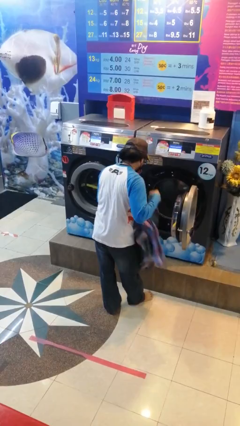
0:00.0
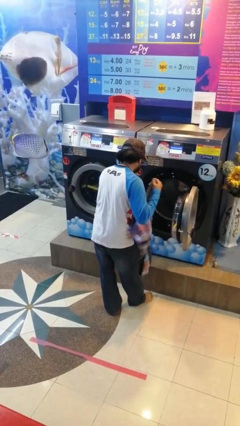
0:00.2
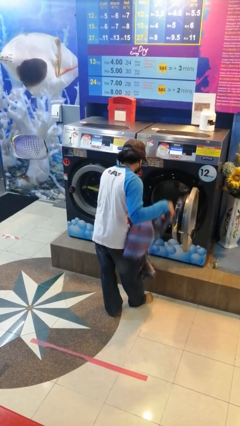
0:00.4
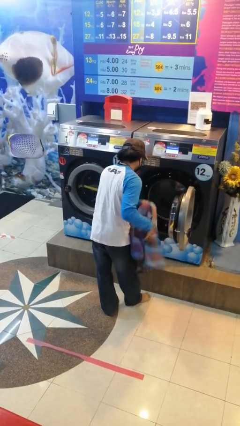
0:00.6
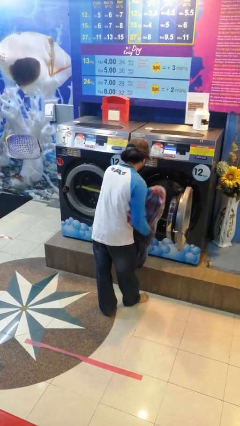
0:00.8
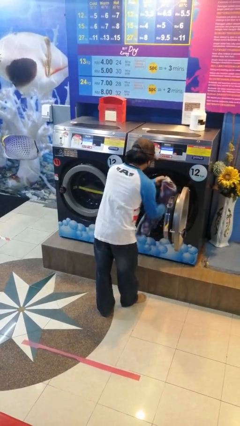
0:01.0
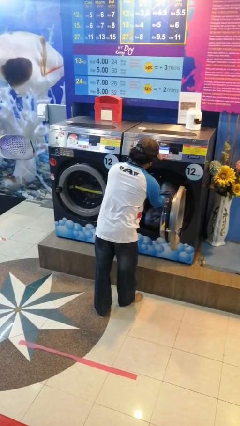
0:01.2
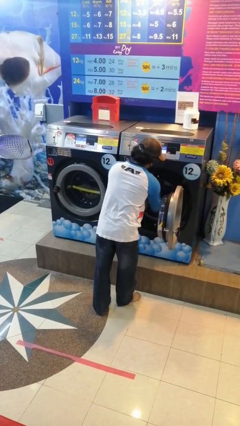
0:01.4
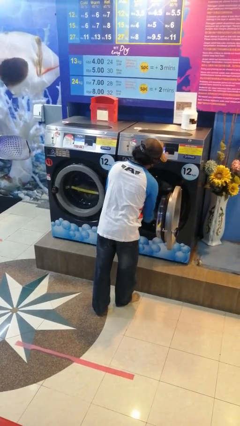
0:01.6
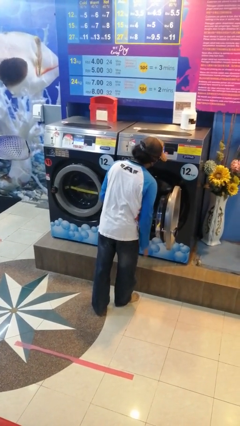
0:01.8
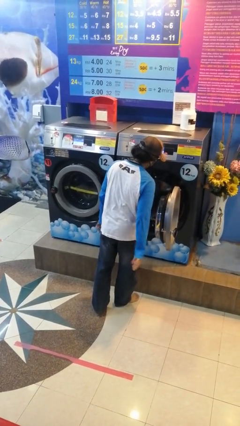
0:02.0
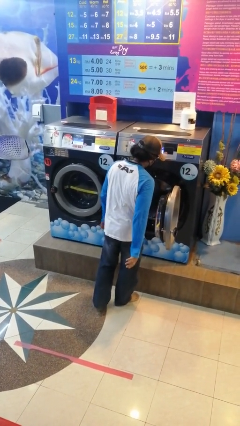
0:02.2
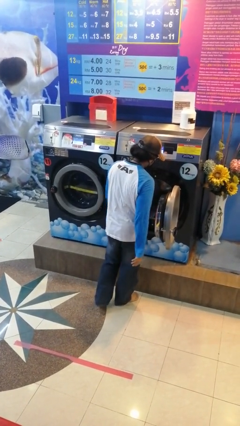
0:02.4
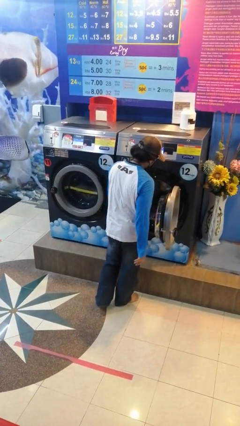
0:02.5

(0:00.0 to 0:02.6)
person loads clotheswasher

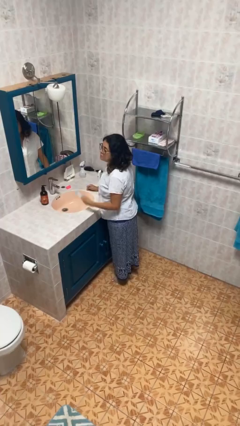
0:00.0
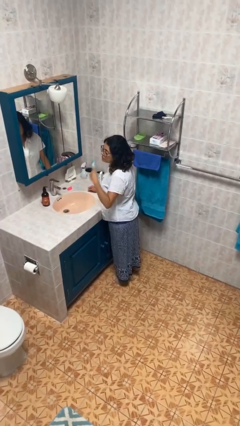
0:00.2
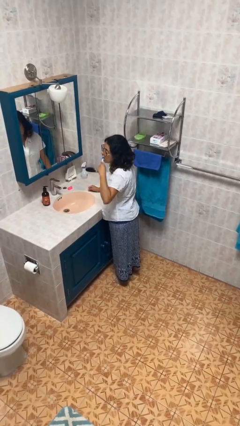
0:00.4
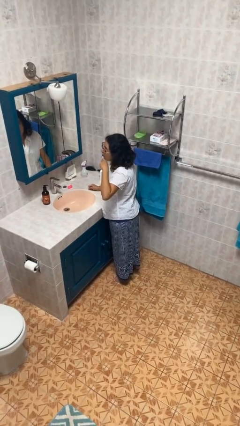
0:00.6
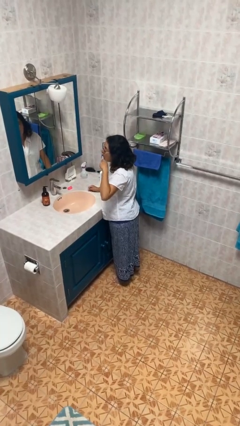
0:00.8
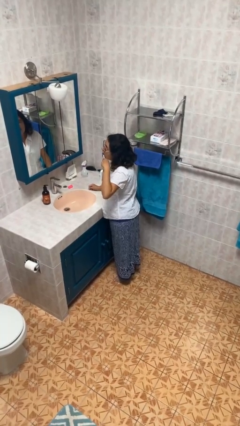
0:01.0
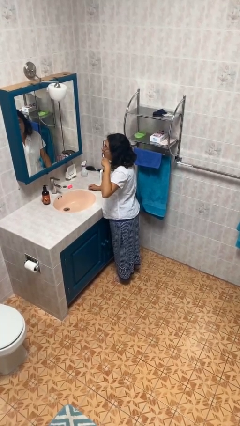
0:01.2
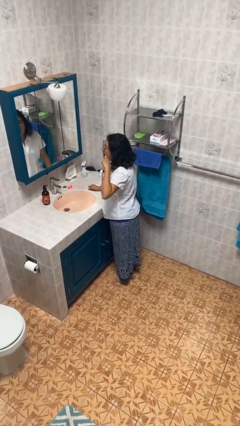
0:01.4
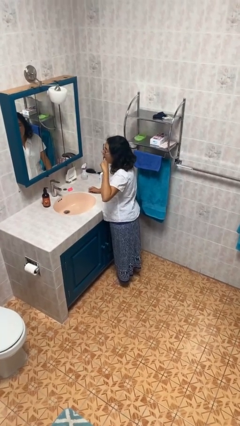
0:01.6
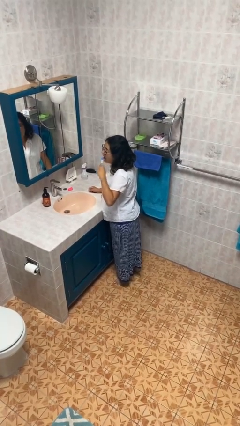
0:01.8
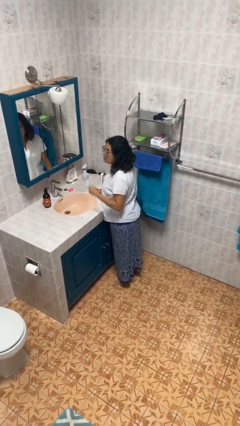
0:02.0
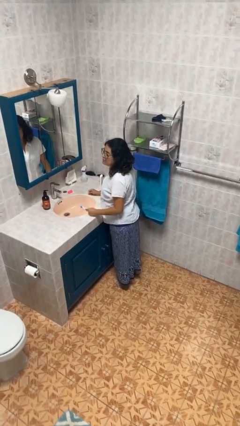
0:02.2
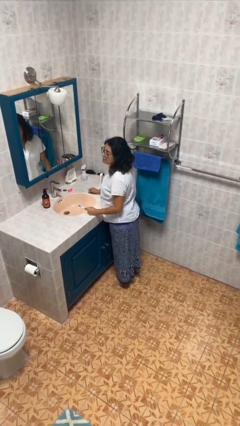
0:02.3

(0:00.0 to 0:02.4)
person brushes teeth

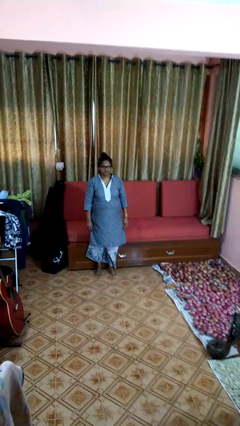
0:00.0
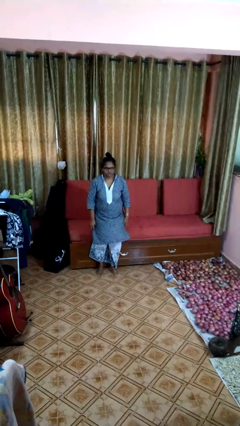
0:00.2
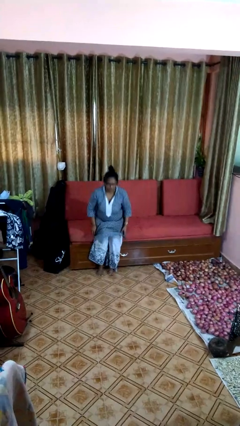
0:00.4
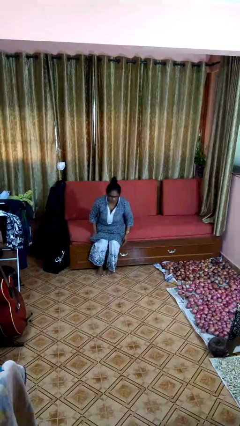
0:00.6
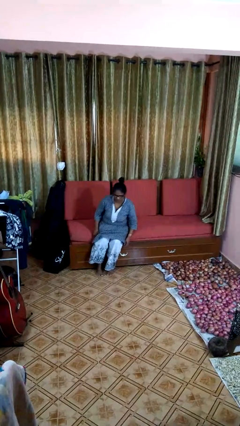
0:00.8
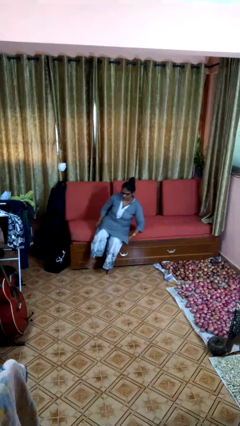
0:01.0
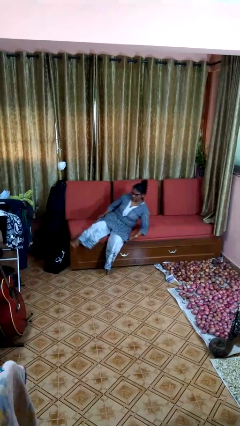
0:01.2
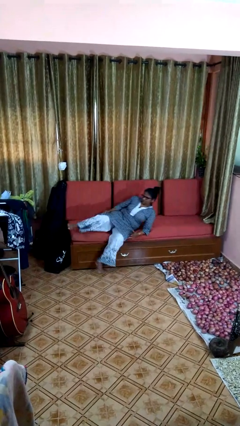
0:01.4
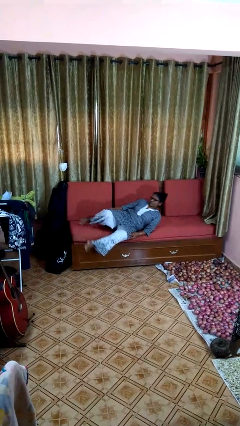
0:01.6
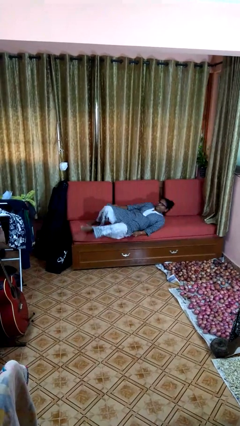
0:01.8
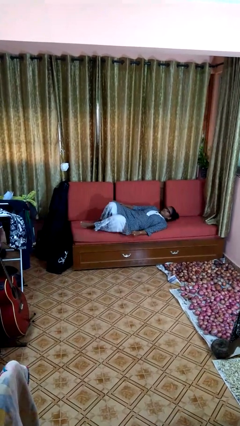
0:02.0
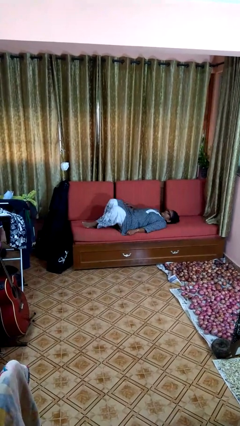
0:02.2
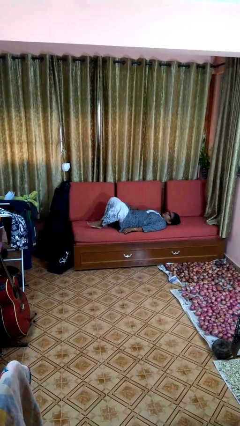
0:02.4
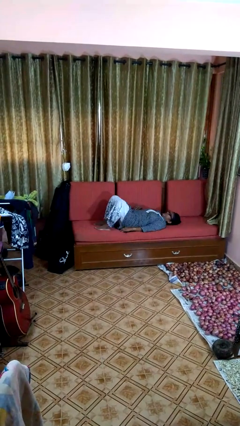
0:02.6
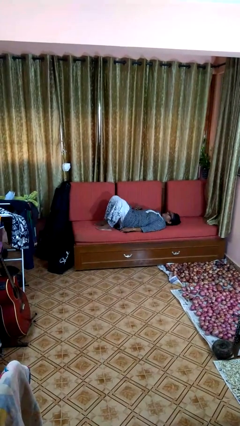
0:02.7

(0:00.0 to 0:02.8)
person lies down on couch

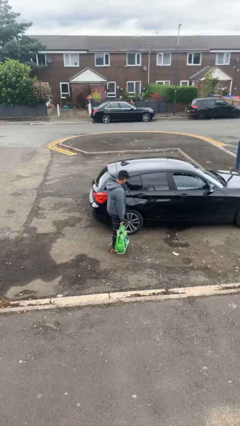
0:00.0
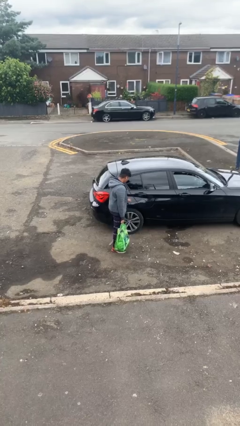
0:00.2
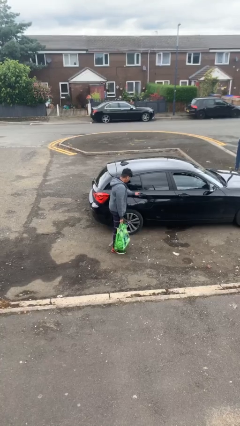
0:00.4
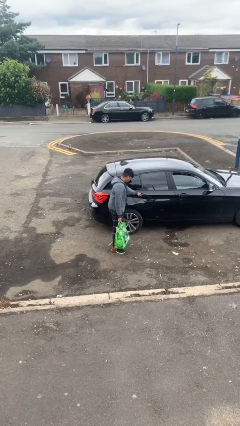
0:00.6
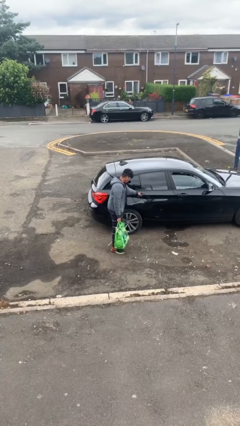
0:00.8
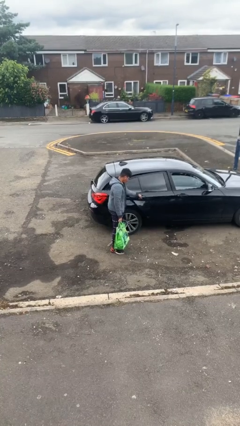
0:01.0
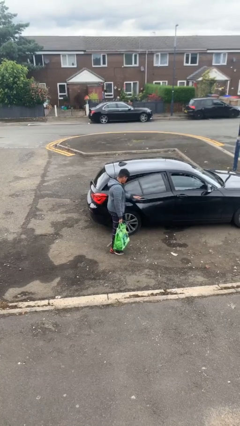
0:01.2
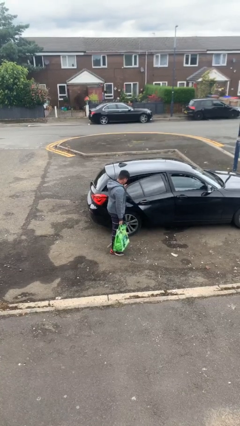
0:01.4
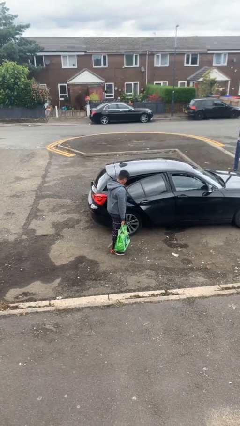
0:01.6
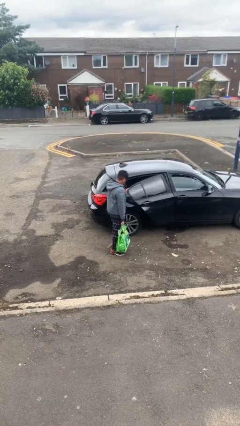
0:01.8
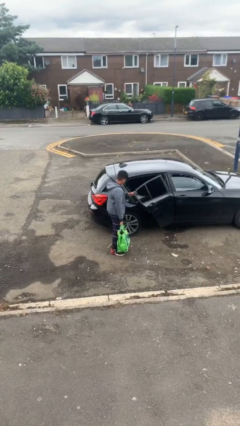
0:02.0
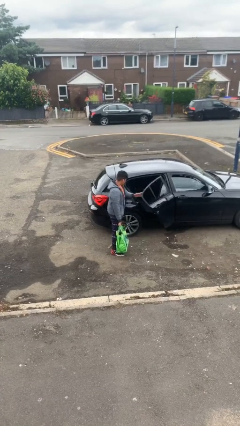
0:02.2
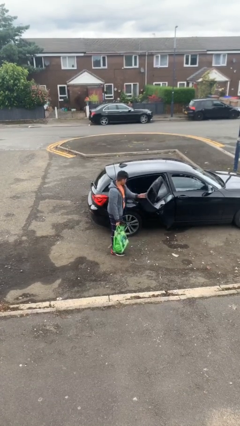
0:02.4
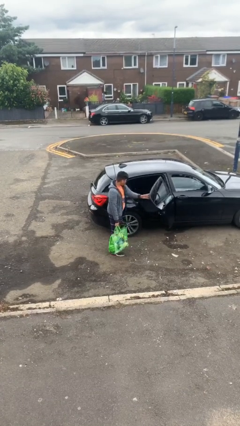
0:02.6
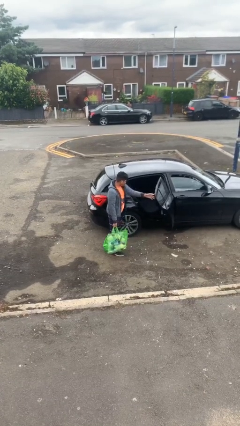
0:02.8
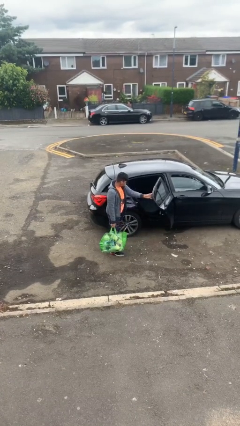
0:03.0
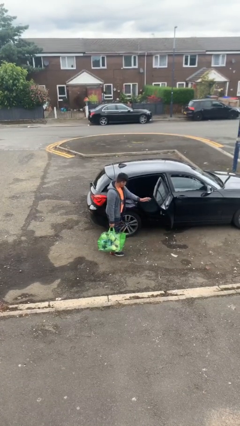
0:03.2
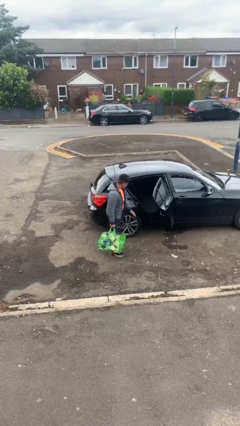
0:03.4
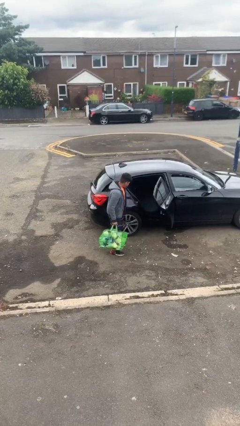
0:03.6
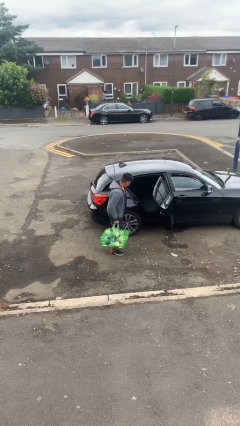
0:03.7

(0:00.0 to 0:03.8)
person opens car door

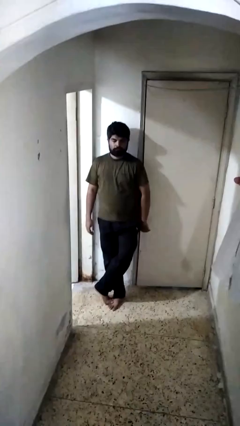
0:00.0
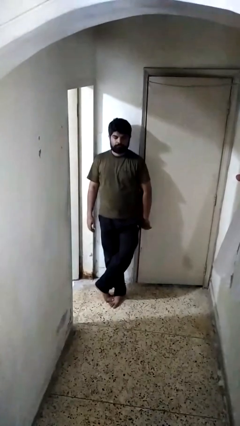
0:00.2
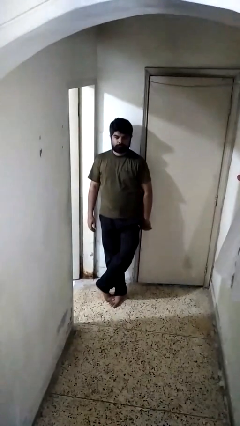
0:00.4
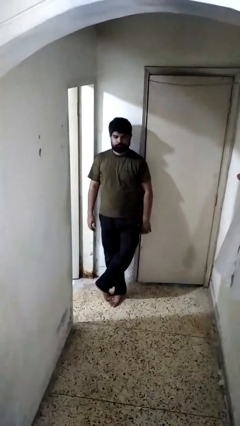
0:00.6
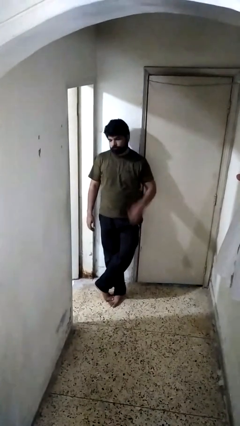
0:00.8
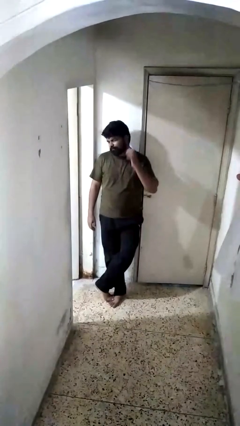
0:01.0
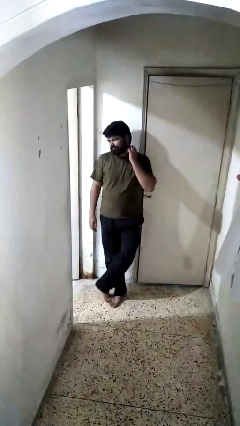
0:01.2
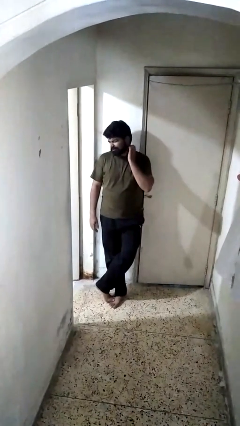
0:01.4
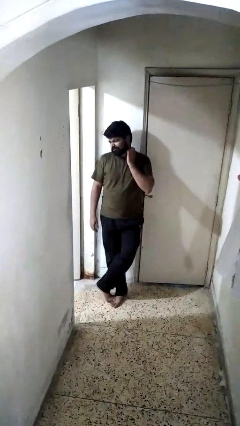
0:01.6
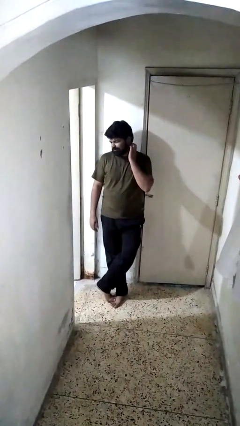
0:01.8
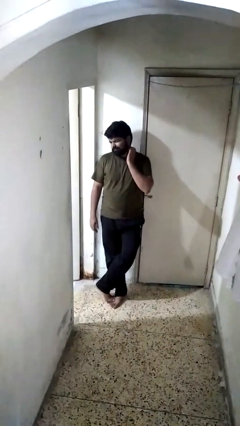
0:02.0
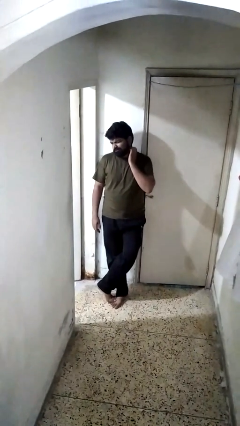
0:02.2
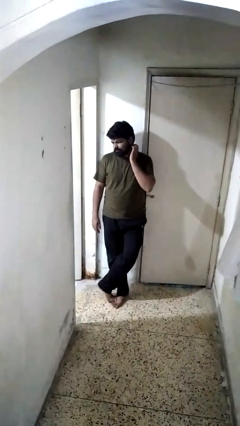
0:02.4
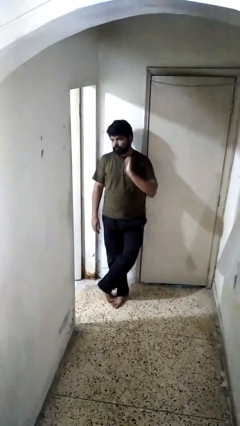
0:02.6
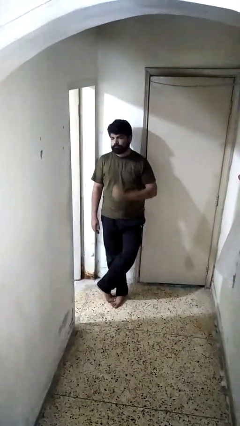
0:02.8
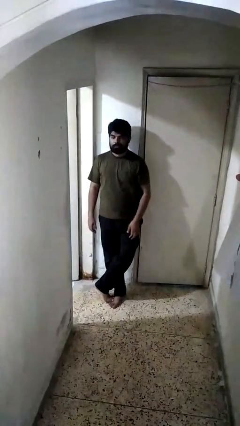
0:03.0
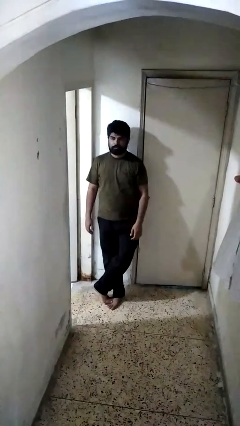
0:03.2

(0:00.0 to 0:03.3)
person rubs neck

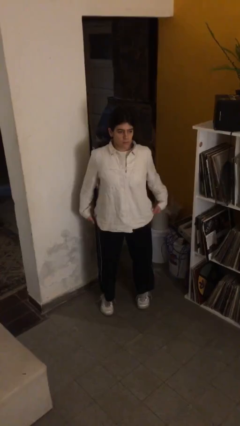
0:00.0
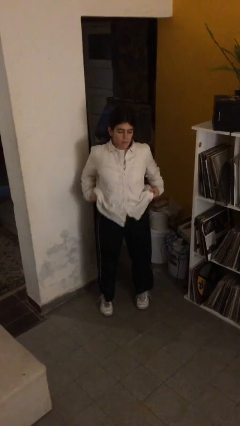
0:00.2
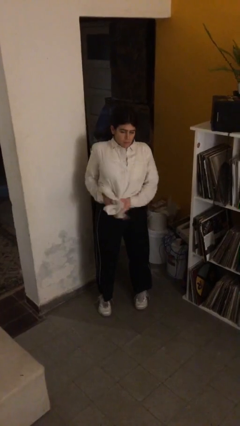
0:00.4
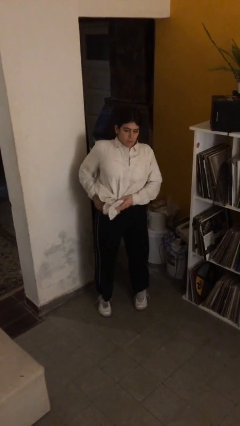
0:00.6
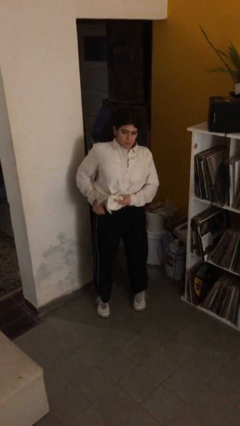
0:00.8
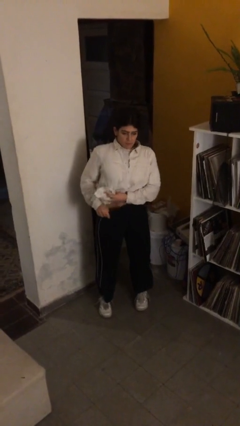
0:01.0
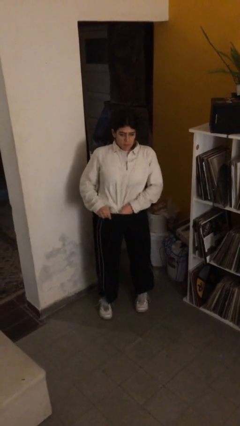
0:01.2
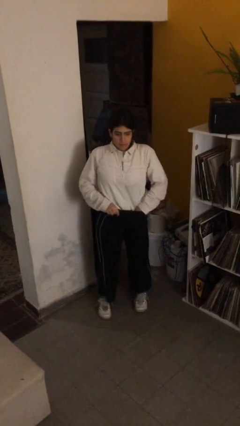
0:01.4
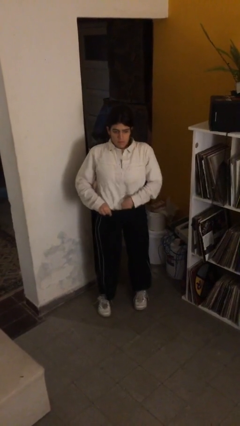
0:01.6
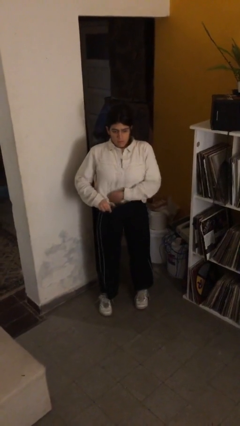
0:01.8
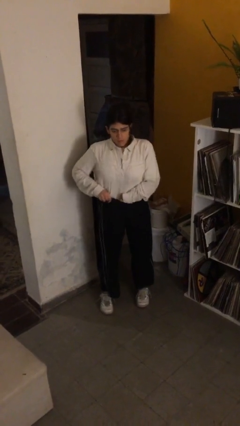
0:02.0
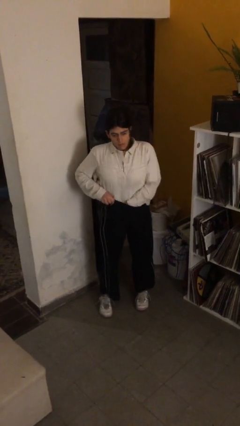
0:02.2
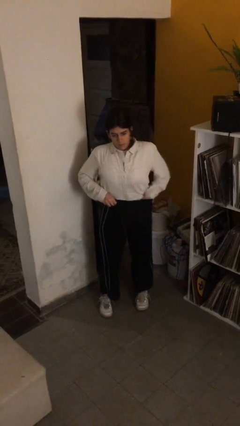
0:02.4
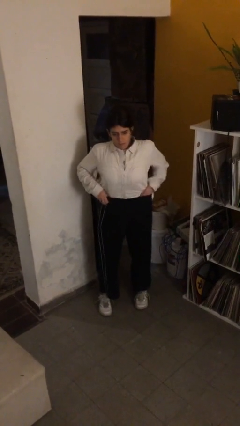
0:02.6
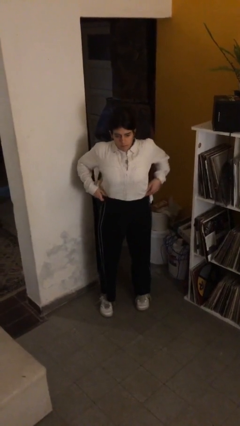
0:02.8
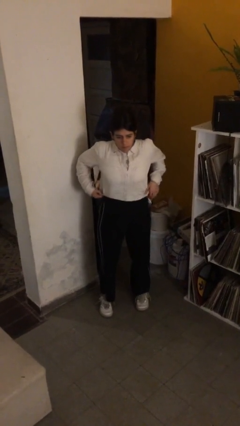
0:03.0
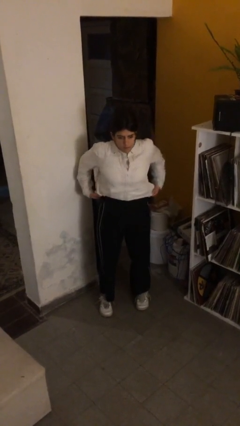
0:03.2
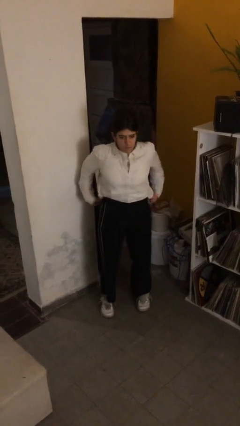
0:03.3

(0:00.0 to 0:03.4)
person tucks in shirt
